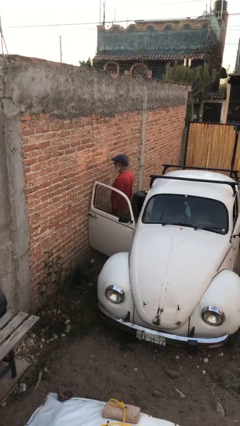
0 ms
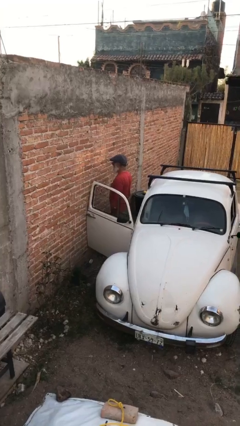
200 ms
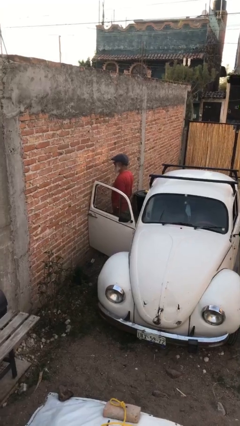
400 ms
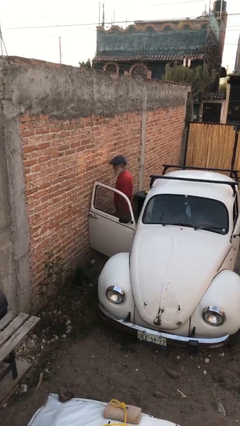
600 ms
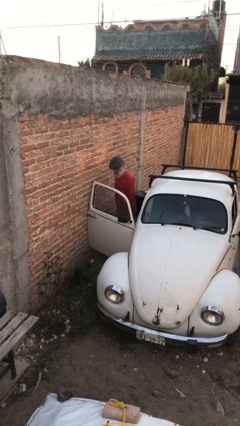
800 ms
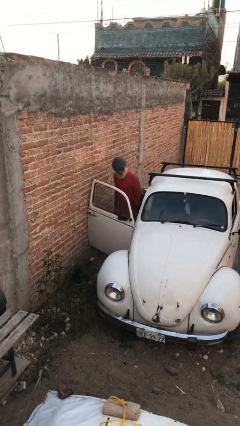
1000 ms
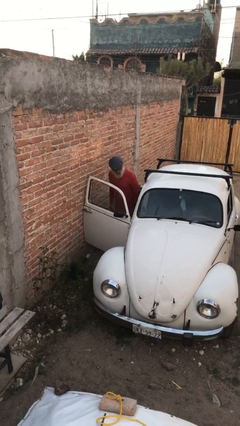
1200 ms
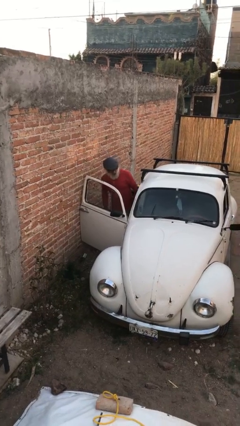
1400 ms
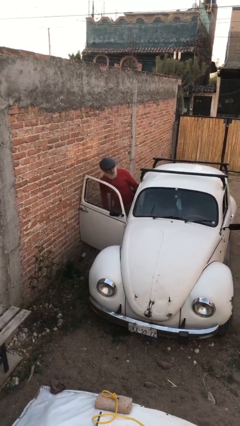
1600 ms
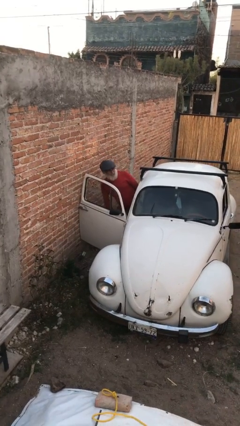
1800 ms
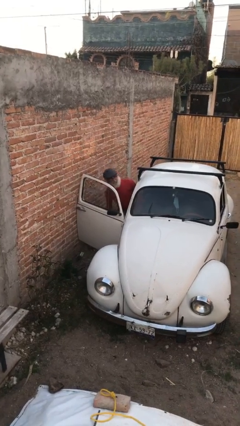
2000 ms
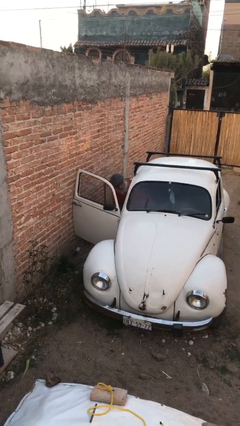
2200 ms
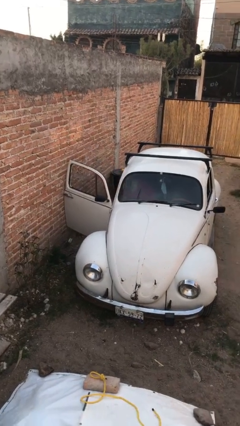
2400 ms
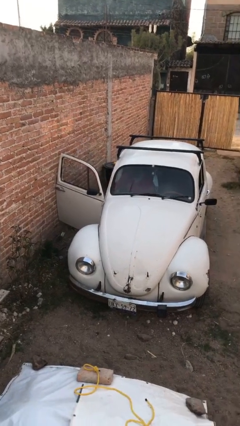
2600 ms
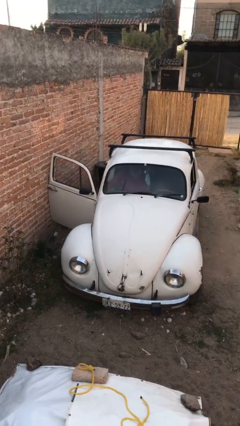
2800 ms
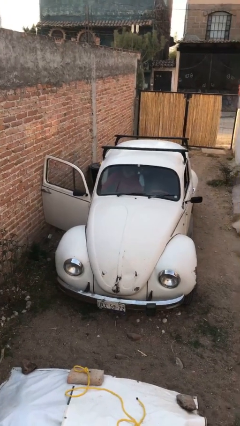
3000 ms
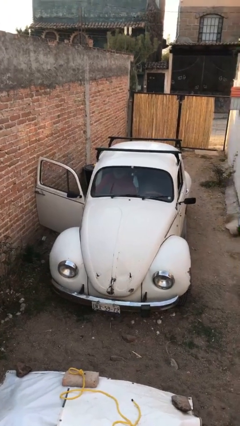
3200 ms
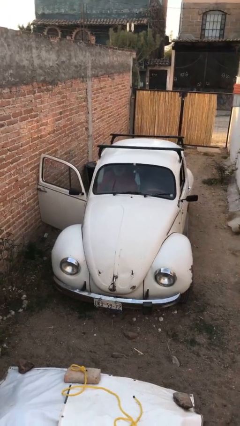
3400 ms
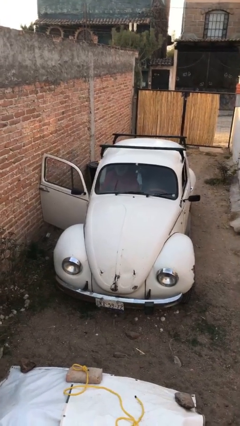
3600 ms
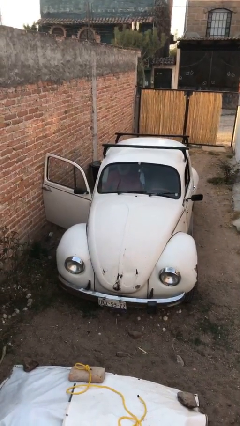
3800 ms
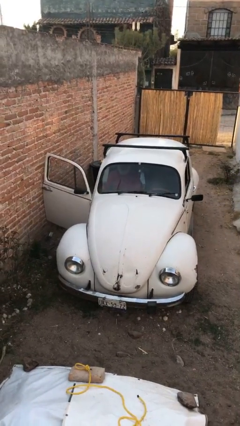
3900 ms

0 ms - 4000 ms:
person enters car

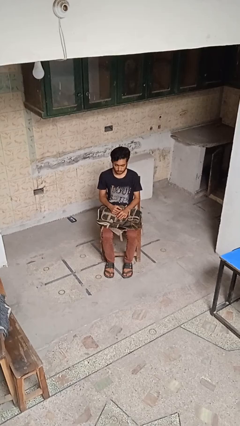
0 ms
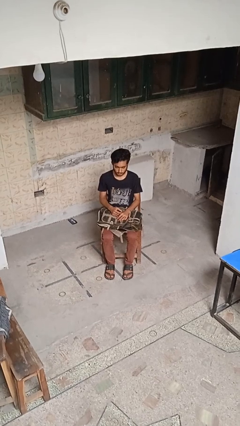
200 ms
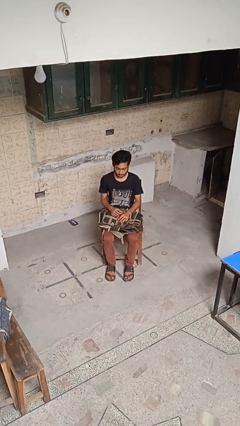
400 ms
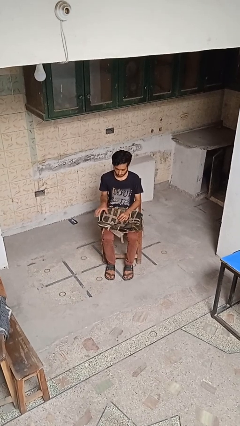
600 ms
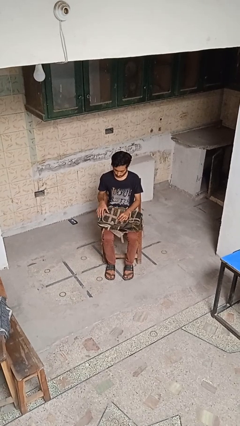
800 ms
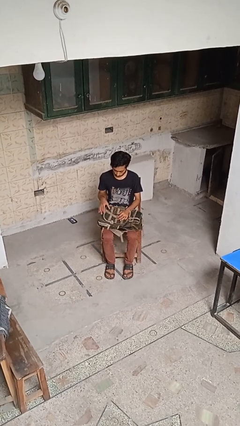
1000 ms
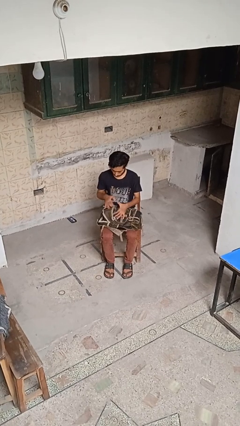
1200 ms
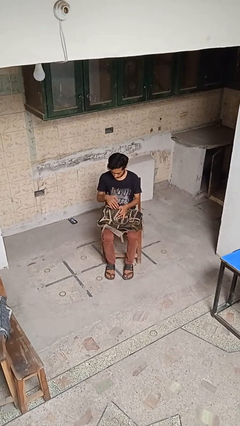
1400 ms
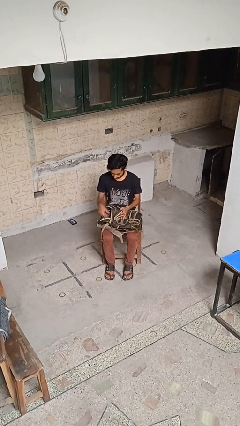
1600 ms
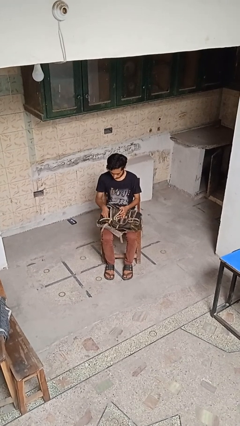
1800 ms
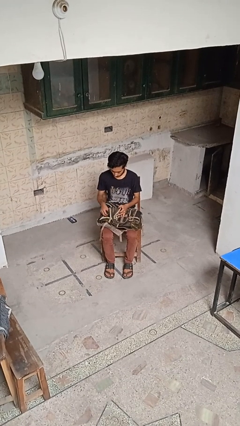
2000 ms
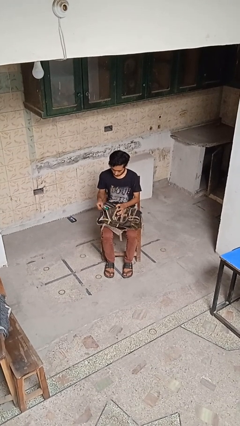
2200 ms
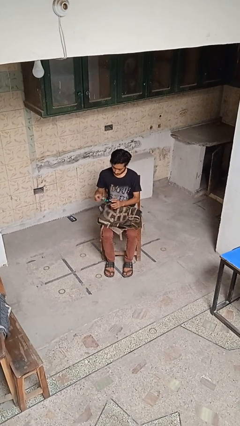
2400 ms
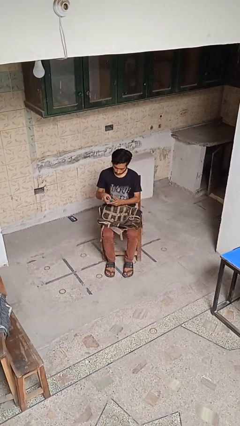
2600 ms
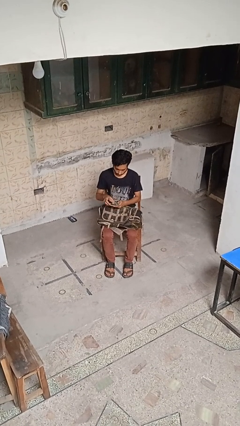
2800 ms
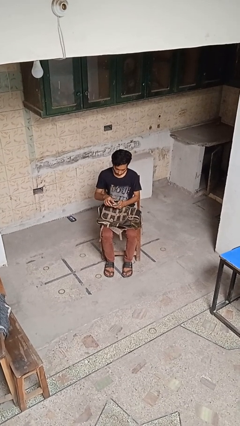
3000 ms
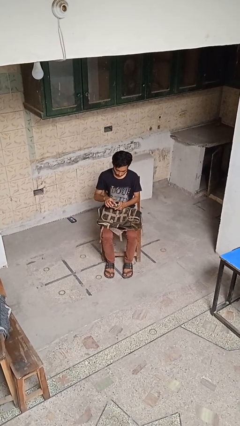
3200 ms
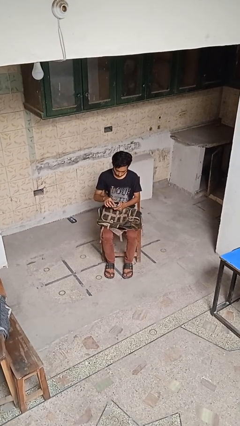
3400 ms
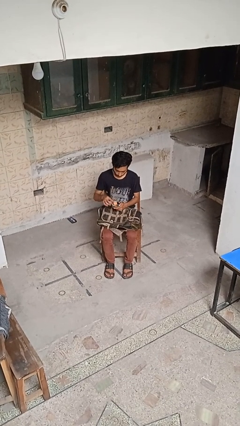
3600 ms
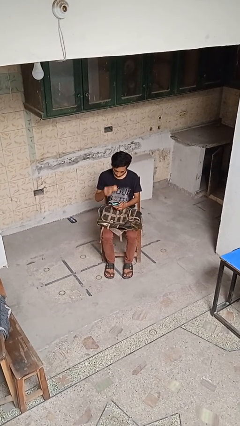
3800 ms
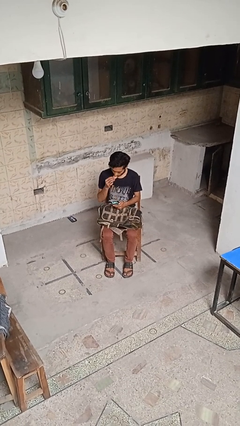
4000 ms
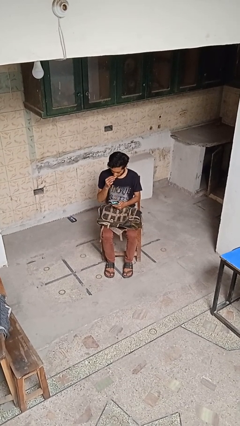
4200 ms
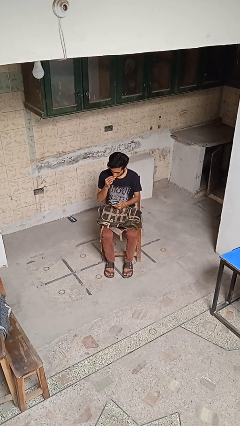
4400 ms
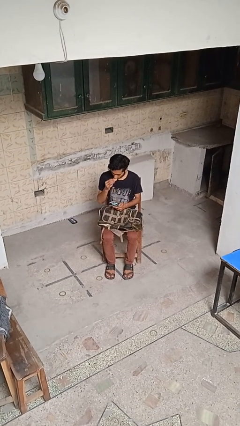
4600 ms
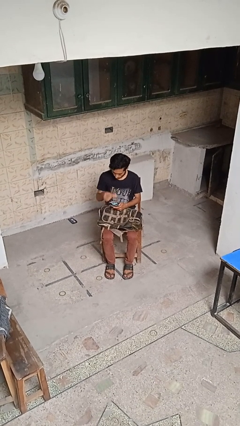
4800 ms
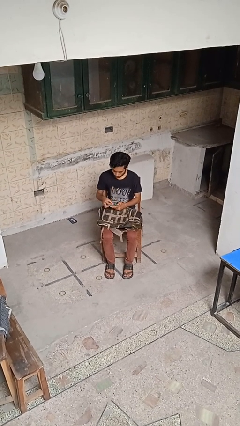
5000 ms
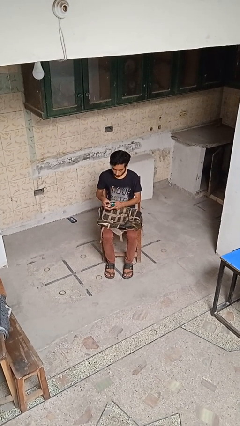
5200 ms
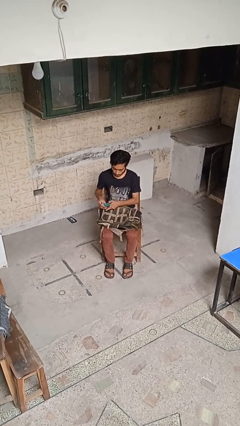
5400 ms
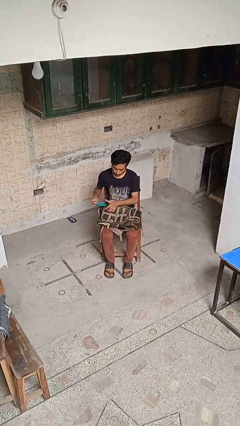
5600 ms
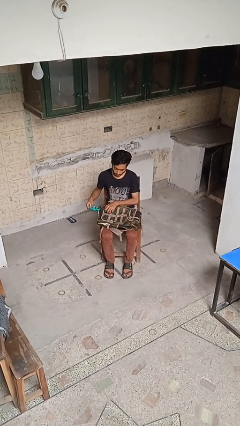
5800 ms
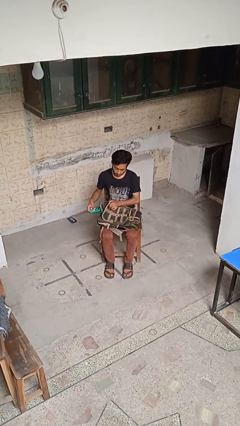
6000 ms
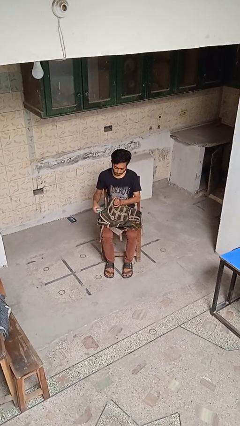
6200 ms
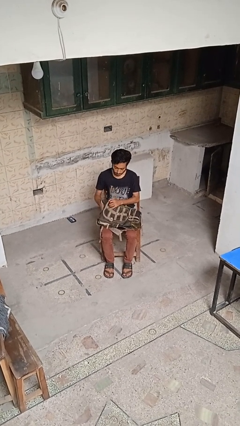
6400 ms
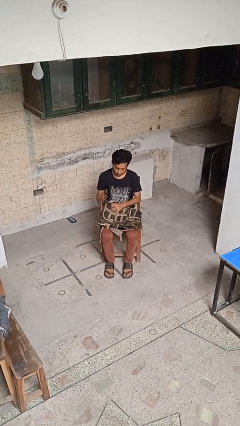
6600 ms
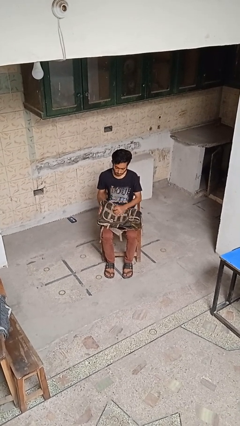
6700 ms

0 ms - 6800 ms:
person eats snack from bag

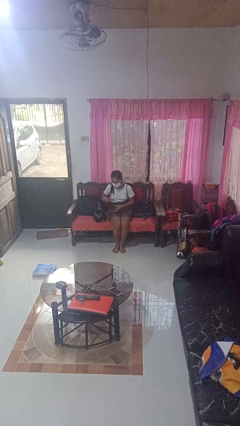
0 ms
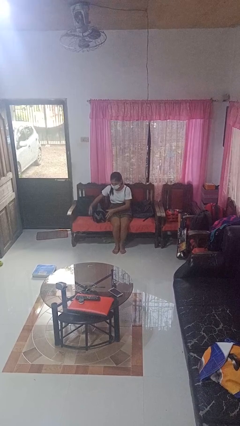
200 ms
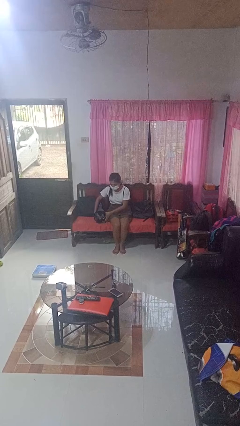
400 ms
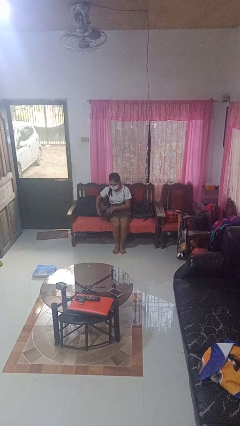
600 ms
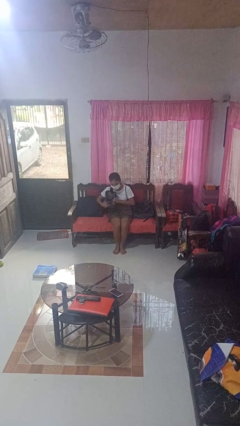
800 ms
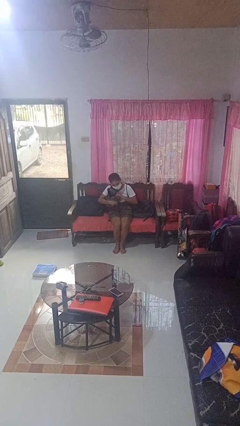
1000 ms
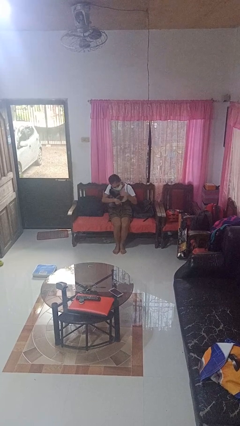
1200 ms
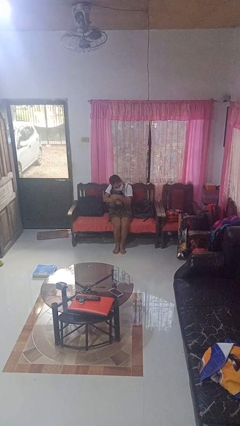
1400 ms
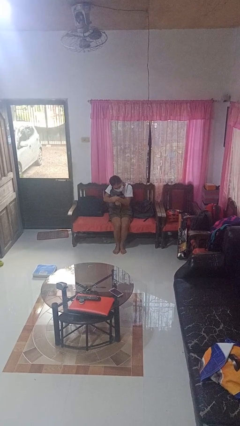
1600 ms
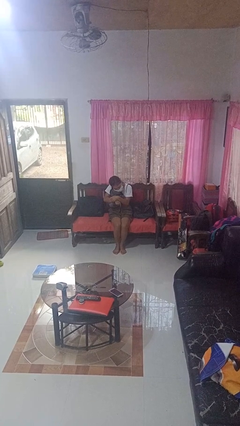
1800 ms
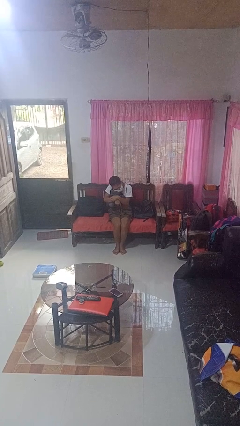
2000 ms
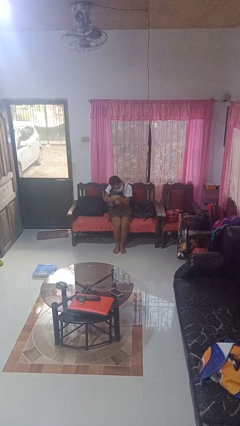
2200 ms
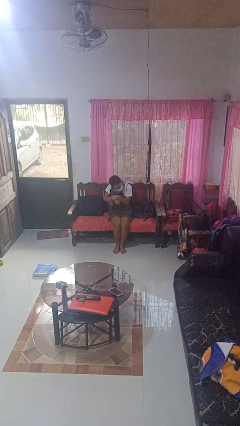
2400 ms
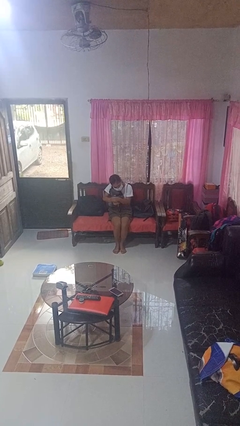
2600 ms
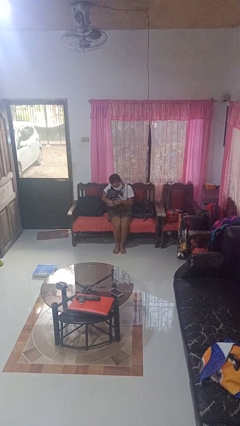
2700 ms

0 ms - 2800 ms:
person hugs stuffed animal

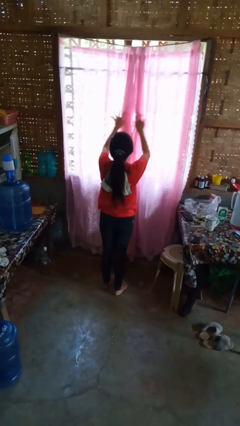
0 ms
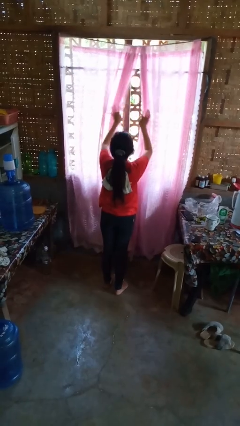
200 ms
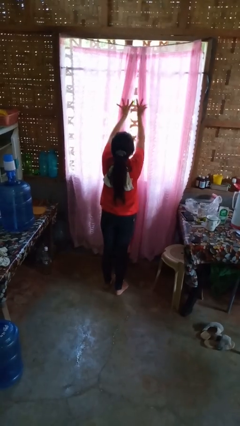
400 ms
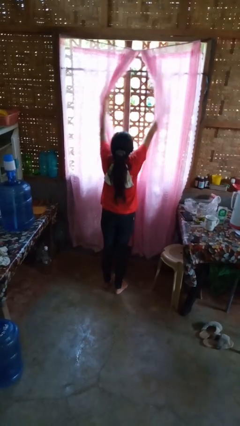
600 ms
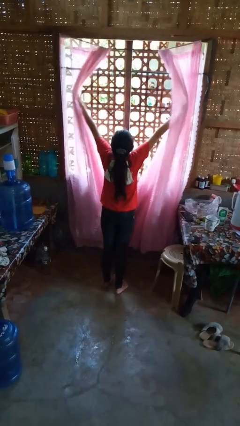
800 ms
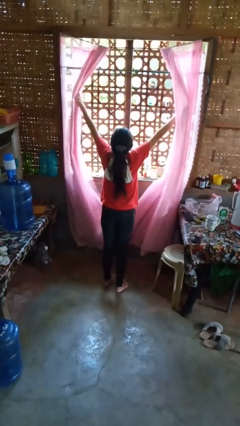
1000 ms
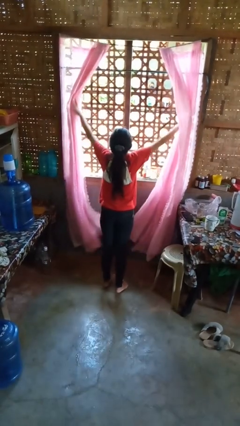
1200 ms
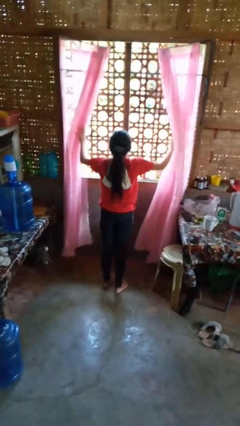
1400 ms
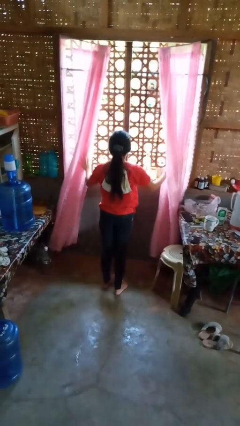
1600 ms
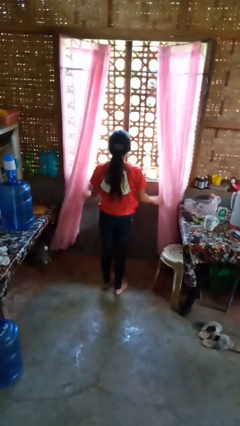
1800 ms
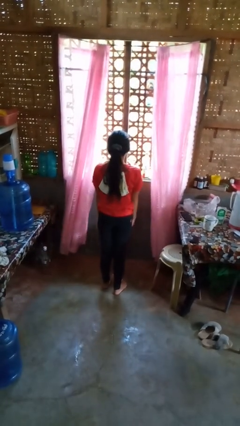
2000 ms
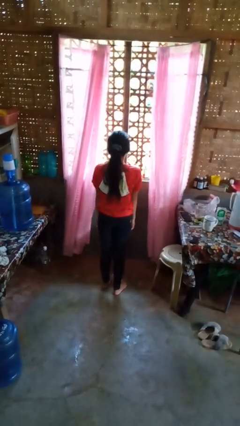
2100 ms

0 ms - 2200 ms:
person opens curtains

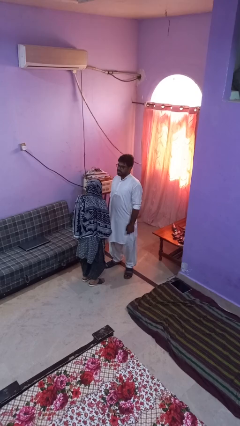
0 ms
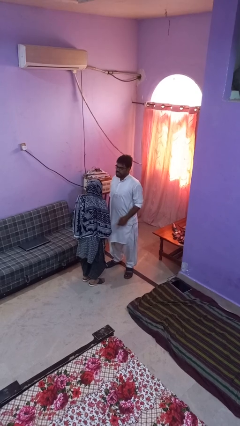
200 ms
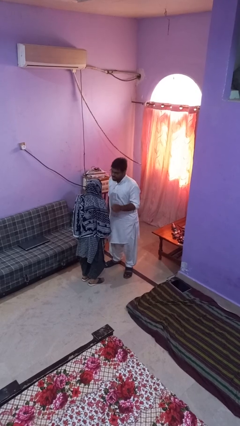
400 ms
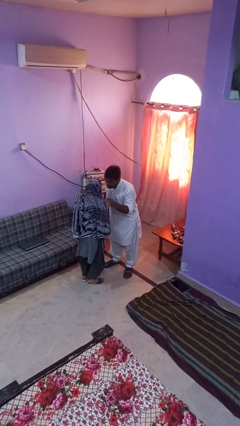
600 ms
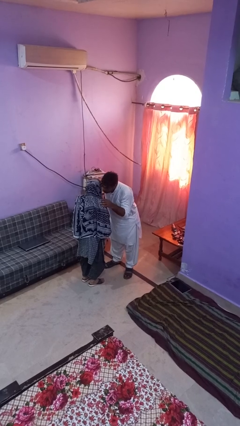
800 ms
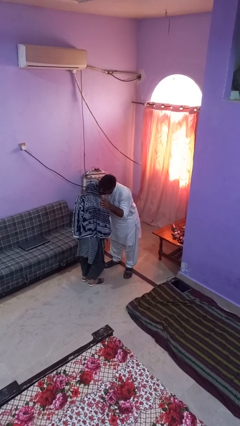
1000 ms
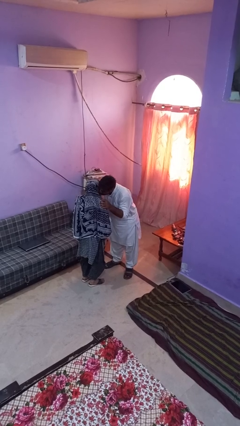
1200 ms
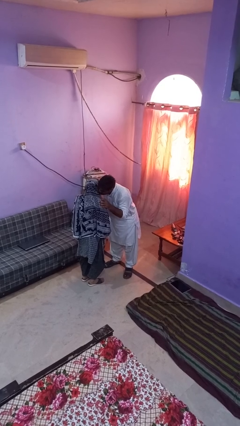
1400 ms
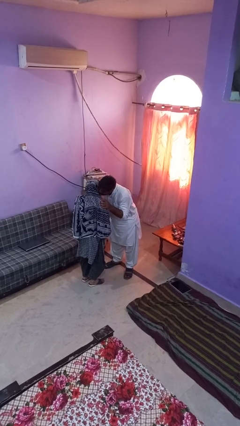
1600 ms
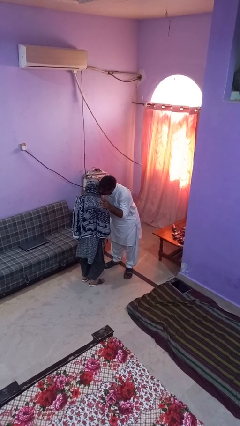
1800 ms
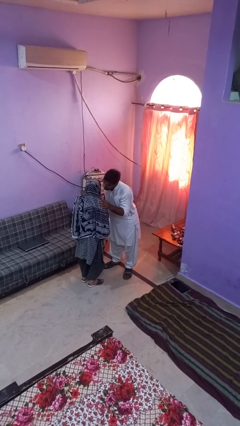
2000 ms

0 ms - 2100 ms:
person kisses cheek of person

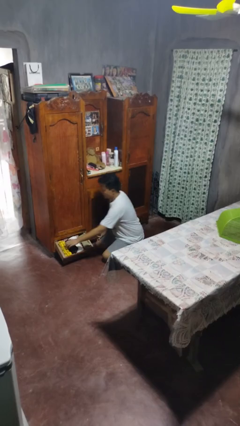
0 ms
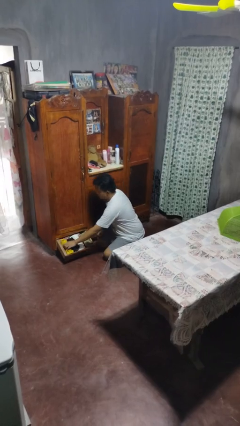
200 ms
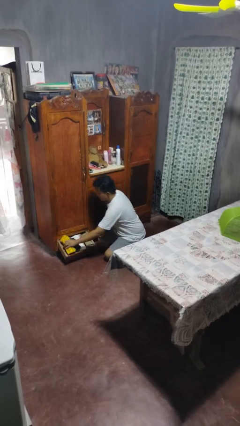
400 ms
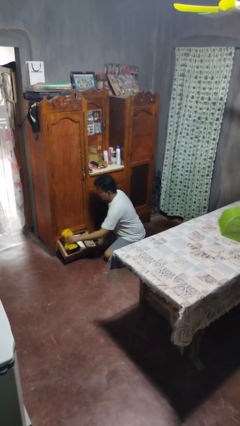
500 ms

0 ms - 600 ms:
person takes clothes from dresser
